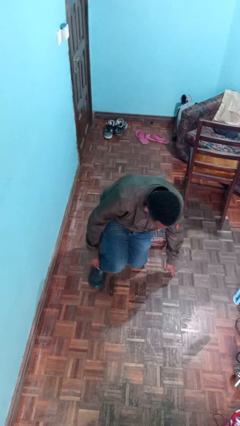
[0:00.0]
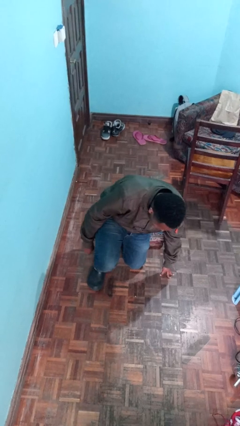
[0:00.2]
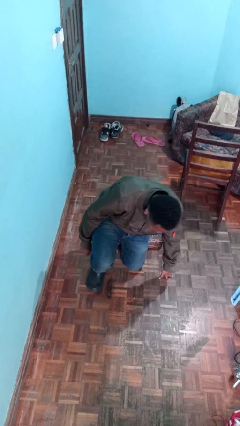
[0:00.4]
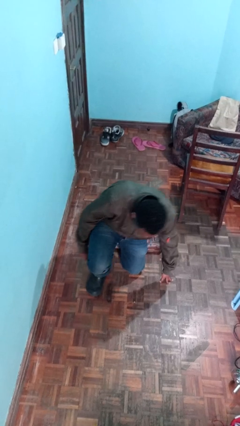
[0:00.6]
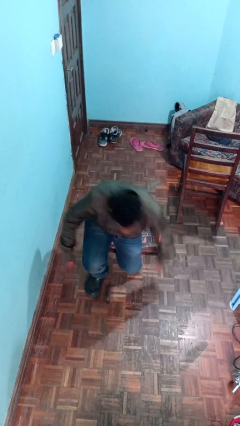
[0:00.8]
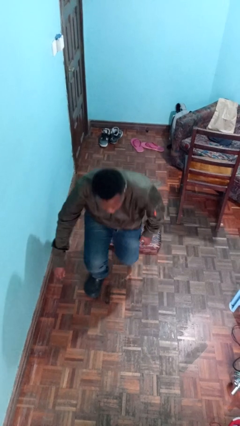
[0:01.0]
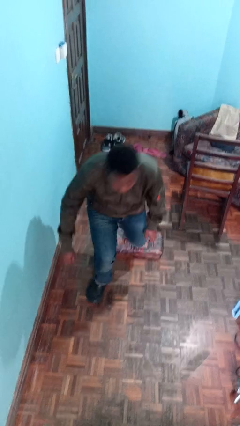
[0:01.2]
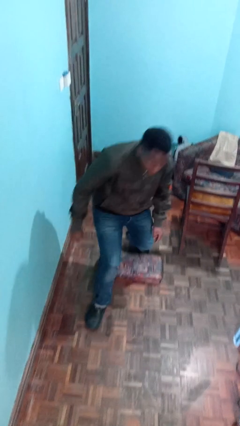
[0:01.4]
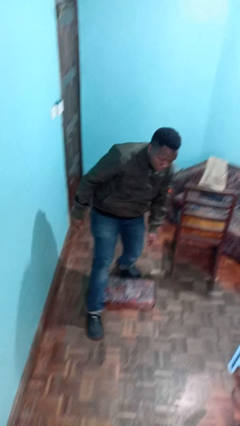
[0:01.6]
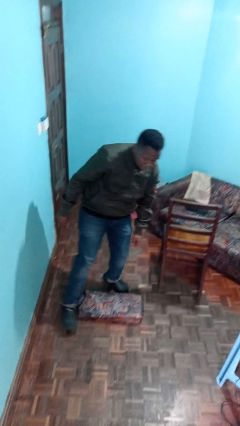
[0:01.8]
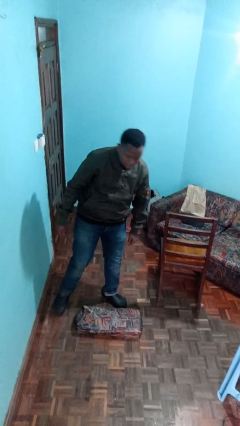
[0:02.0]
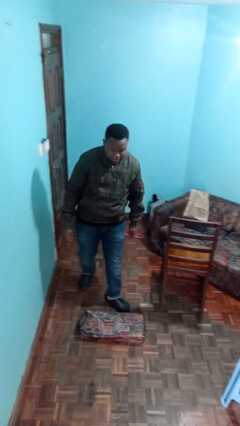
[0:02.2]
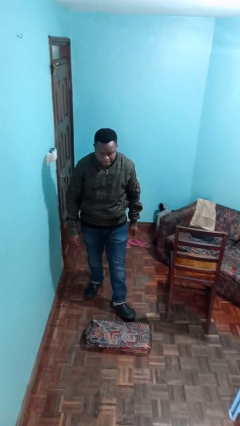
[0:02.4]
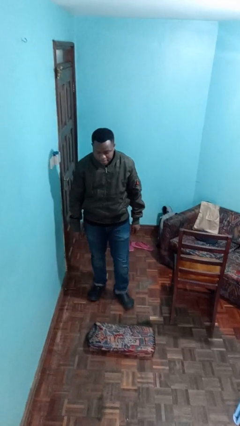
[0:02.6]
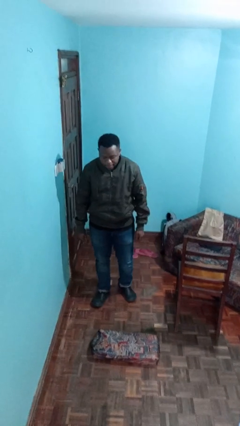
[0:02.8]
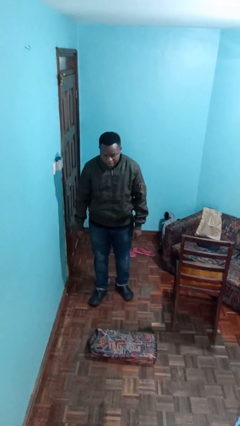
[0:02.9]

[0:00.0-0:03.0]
person stands up from floor

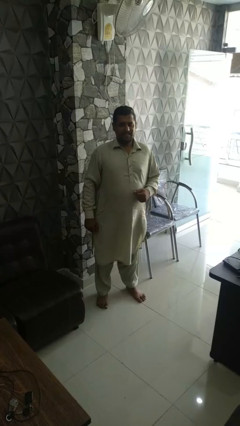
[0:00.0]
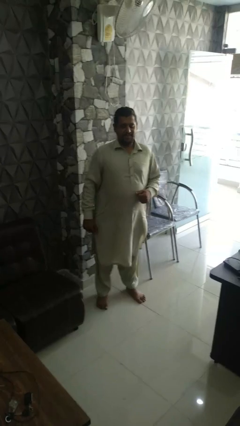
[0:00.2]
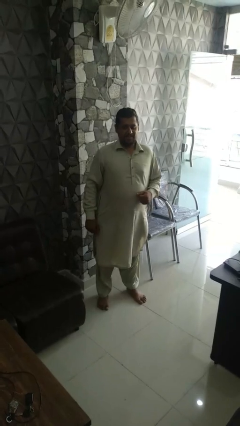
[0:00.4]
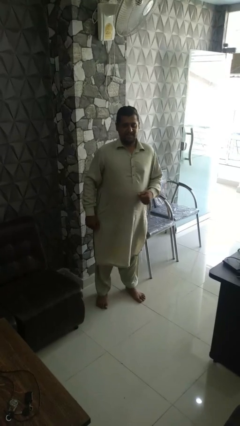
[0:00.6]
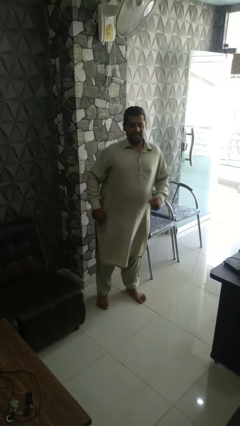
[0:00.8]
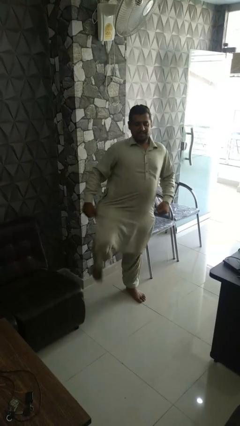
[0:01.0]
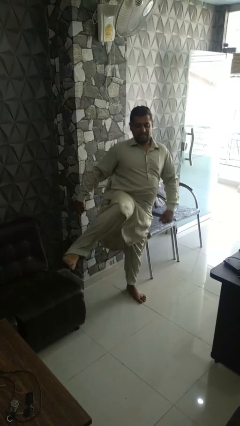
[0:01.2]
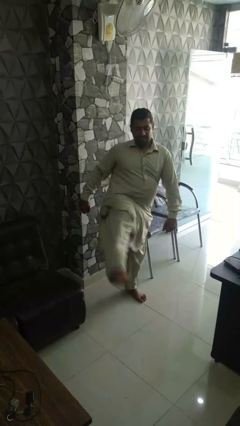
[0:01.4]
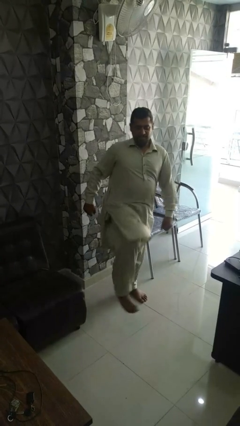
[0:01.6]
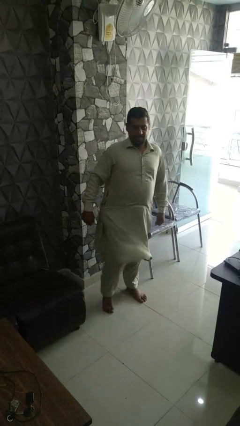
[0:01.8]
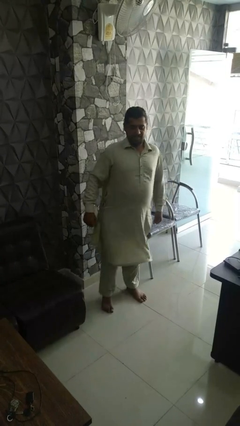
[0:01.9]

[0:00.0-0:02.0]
person karate kicks

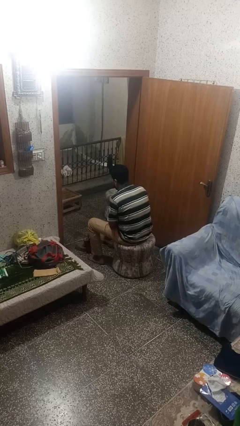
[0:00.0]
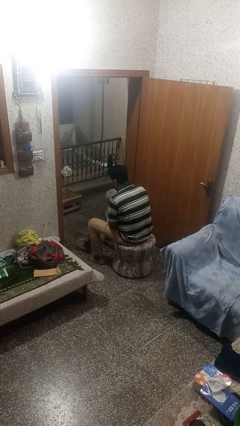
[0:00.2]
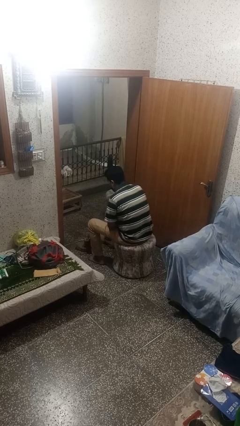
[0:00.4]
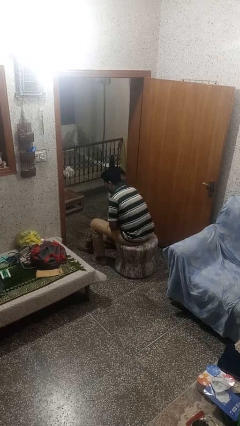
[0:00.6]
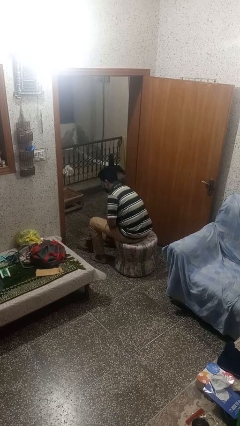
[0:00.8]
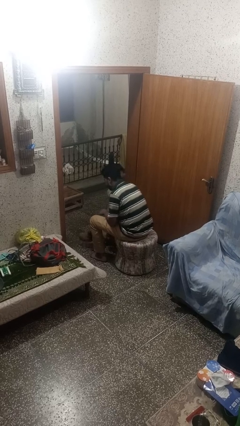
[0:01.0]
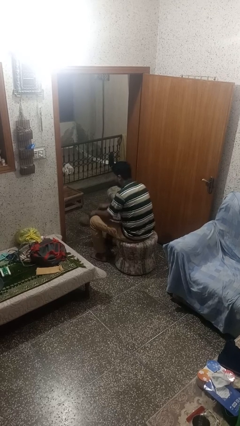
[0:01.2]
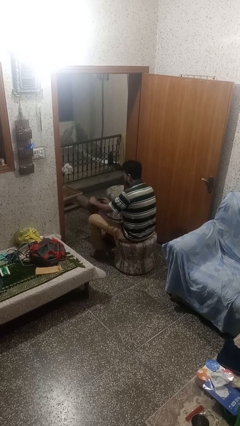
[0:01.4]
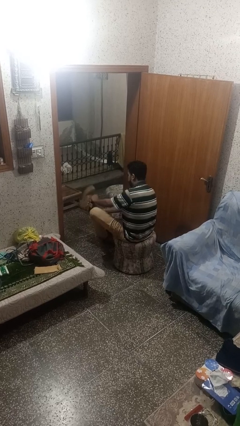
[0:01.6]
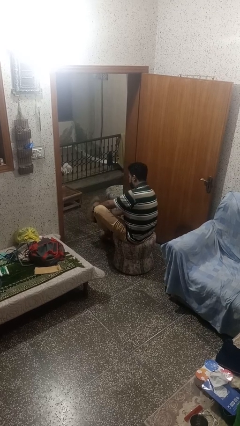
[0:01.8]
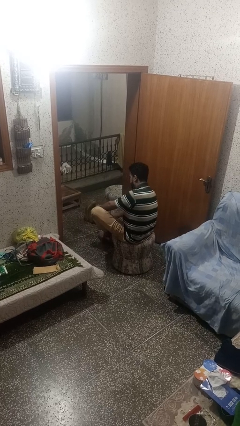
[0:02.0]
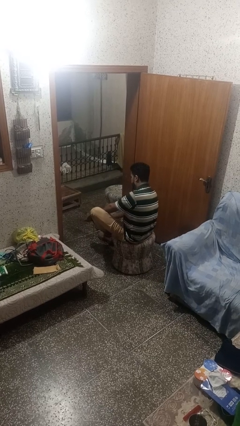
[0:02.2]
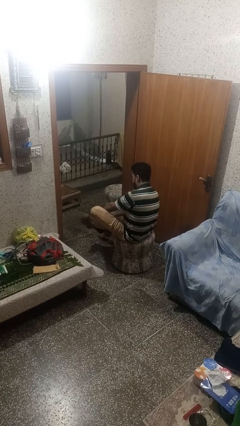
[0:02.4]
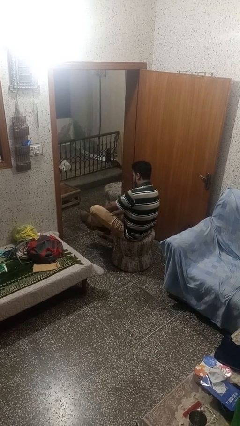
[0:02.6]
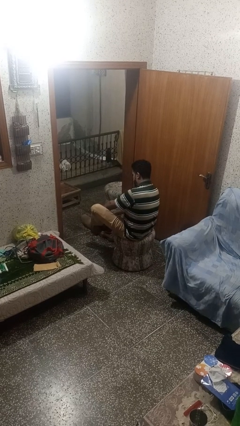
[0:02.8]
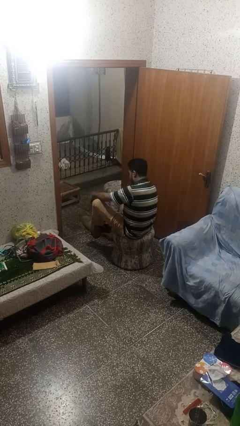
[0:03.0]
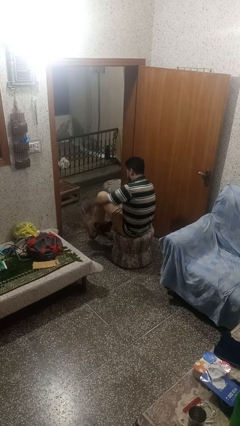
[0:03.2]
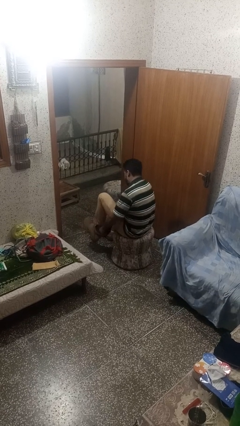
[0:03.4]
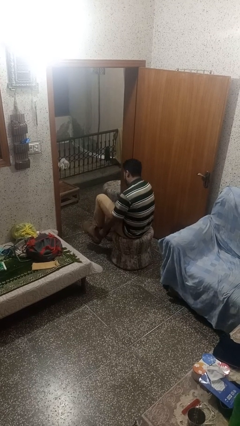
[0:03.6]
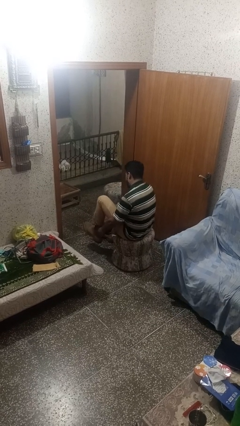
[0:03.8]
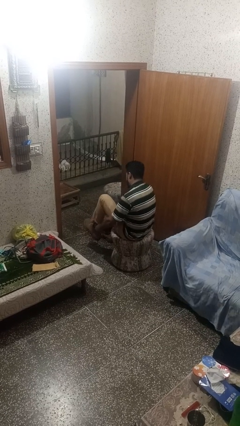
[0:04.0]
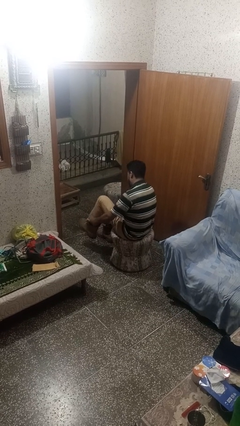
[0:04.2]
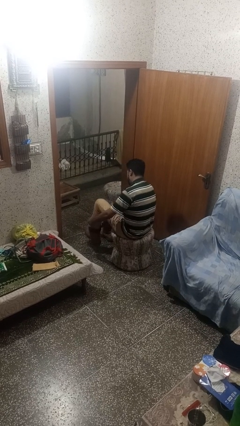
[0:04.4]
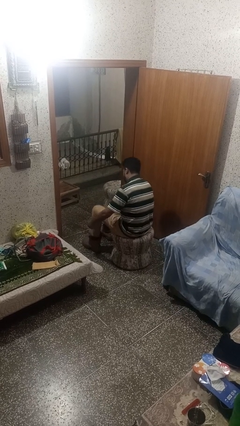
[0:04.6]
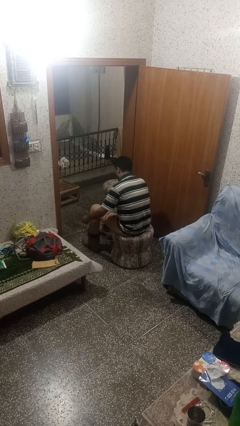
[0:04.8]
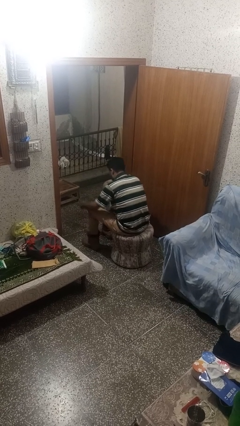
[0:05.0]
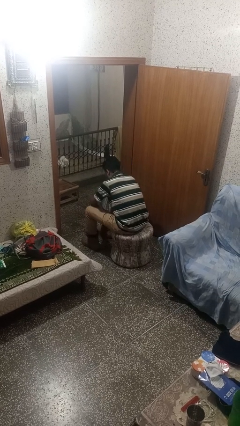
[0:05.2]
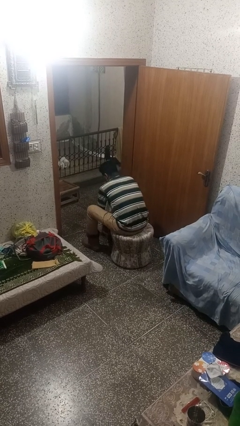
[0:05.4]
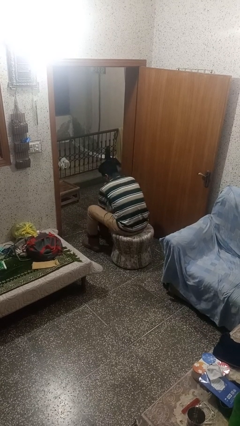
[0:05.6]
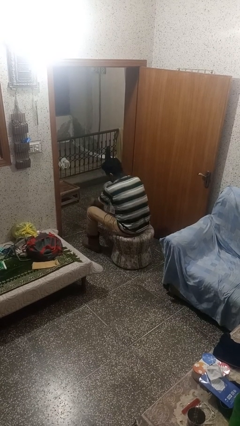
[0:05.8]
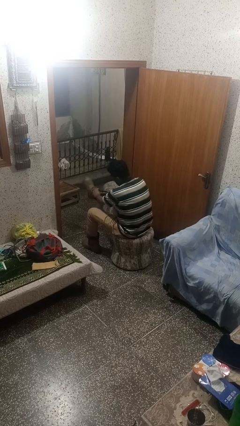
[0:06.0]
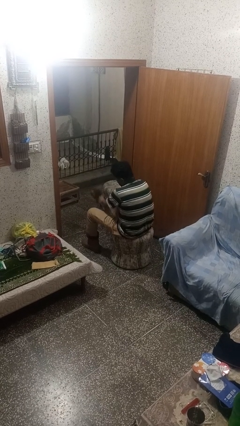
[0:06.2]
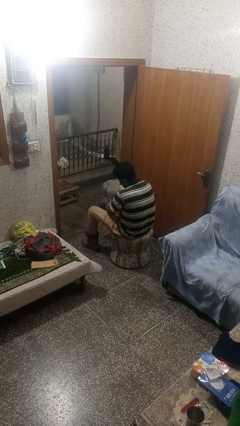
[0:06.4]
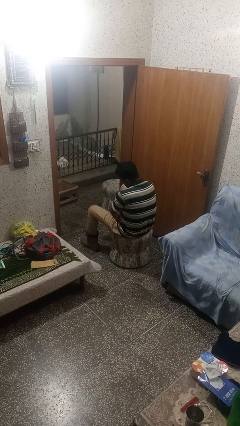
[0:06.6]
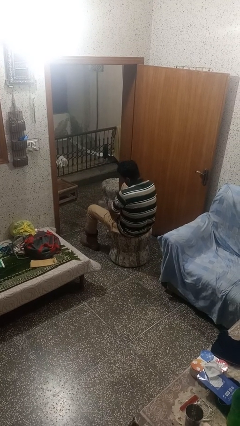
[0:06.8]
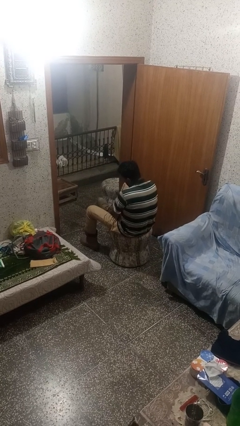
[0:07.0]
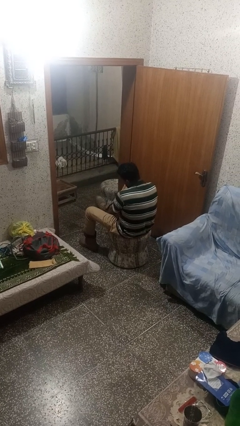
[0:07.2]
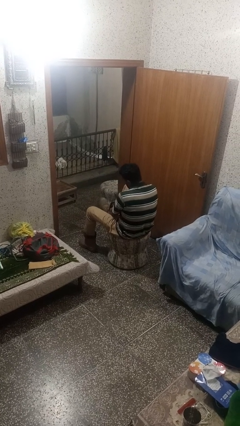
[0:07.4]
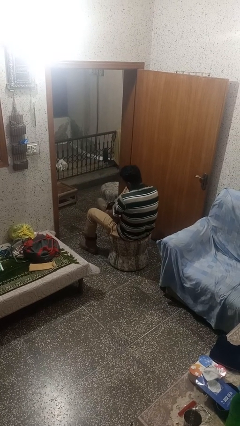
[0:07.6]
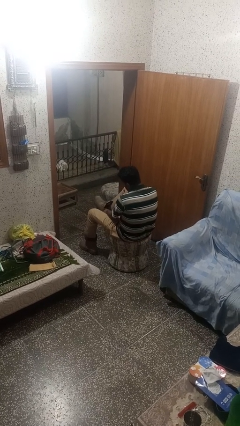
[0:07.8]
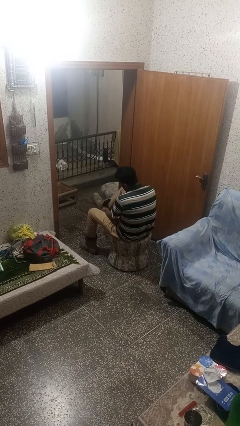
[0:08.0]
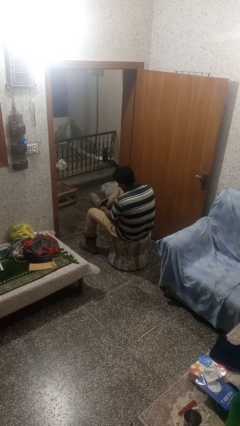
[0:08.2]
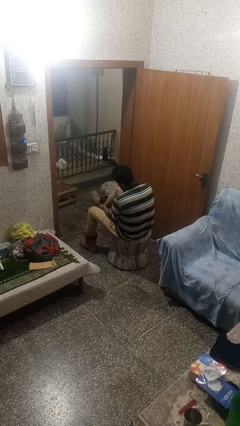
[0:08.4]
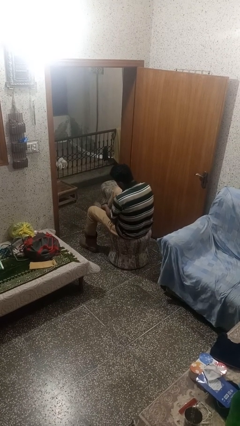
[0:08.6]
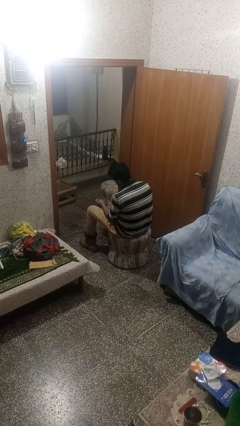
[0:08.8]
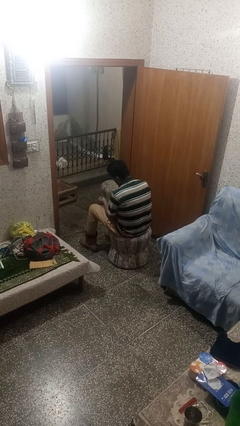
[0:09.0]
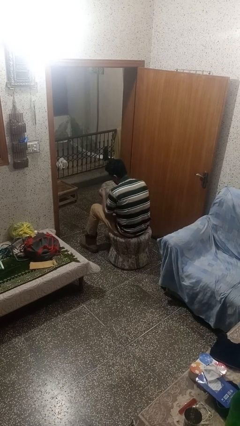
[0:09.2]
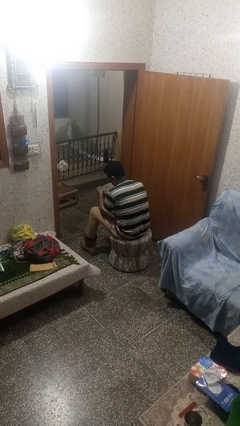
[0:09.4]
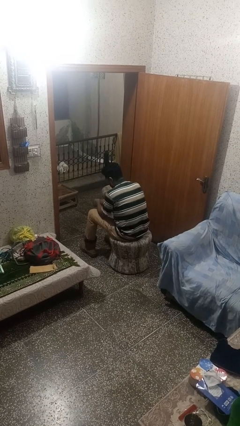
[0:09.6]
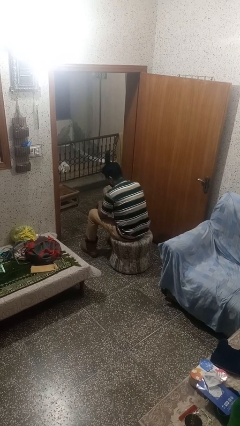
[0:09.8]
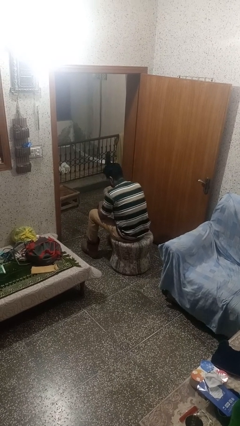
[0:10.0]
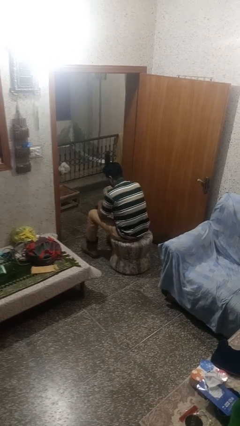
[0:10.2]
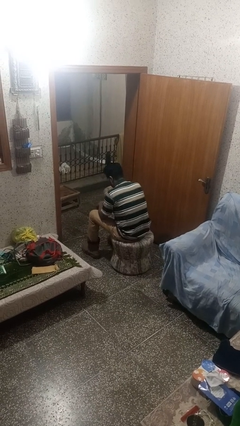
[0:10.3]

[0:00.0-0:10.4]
person puts on shoes

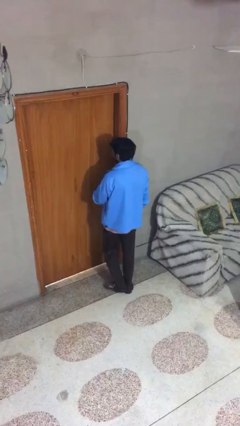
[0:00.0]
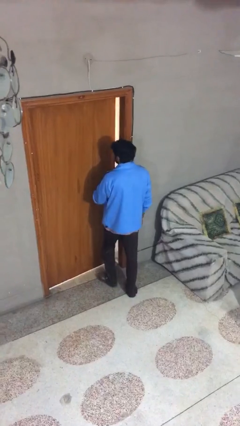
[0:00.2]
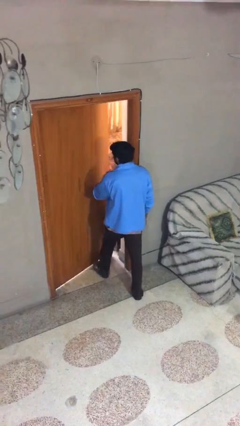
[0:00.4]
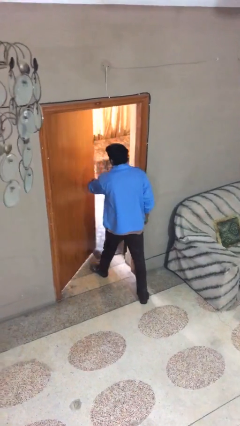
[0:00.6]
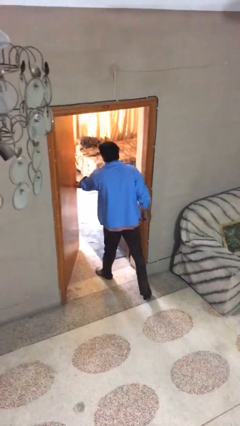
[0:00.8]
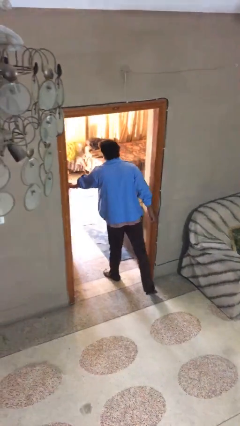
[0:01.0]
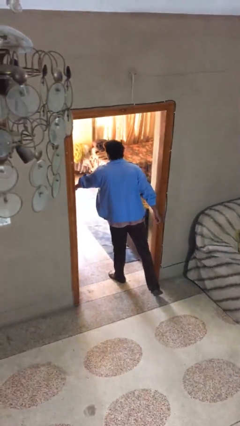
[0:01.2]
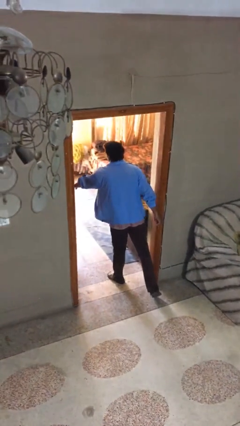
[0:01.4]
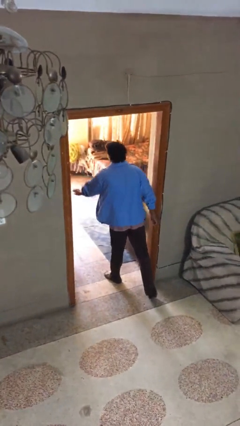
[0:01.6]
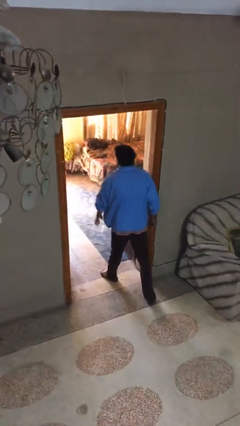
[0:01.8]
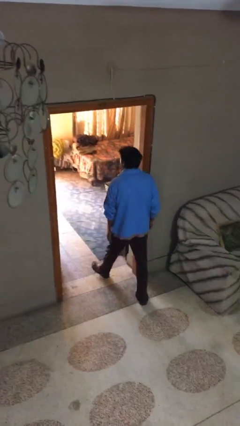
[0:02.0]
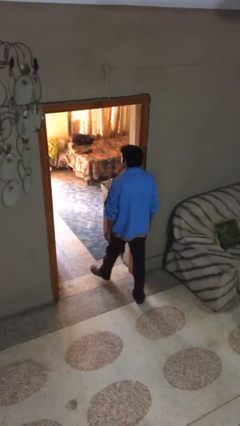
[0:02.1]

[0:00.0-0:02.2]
person opens facility door
